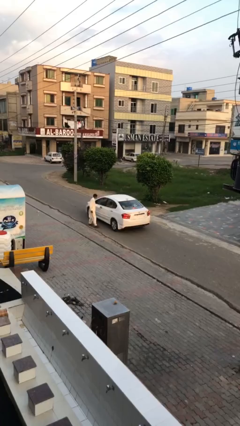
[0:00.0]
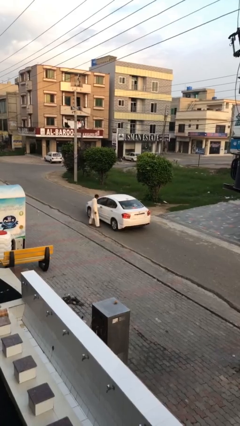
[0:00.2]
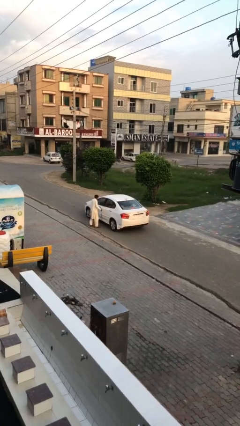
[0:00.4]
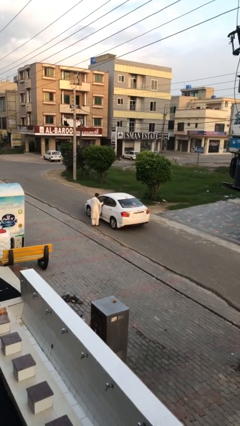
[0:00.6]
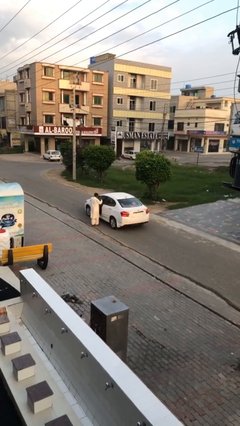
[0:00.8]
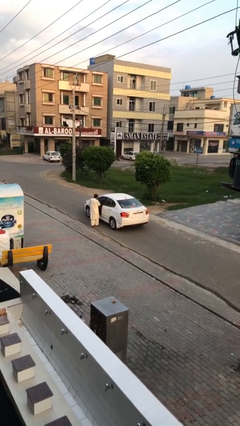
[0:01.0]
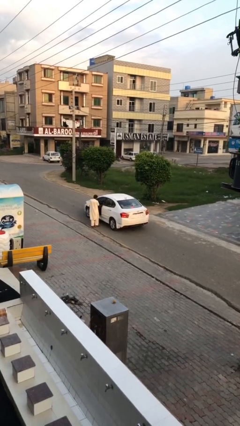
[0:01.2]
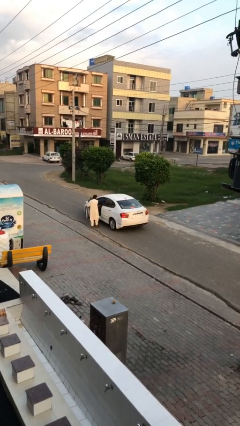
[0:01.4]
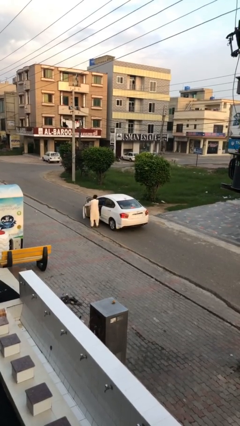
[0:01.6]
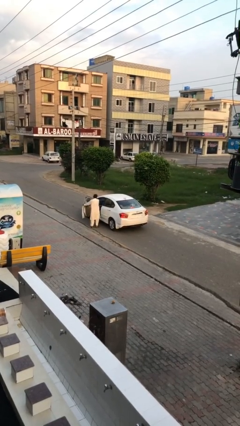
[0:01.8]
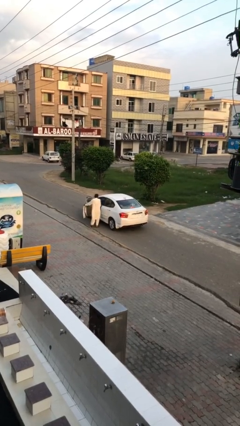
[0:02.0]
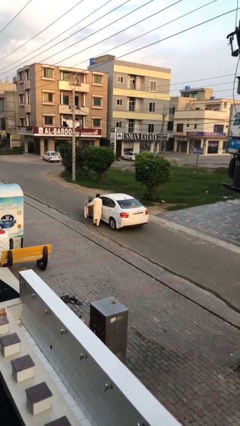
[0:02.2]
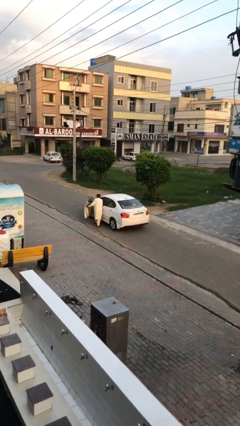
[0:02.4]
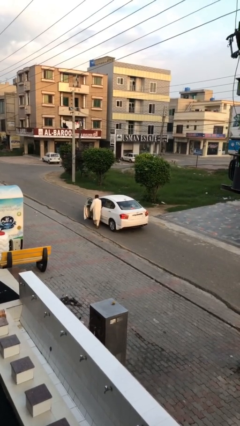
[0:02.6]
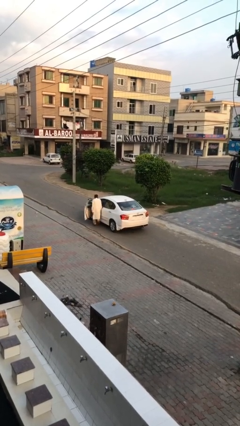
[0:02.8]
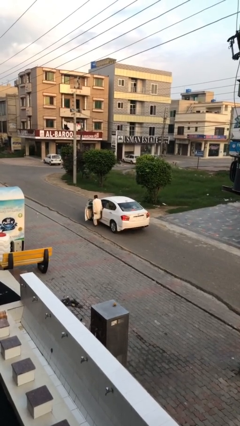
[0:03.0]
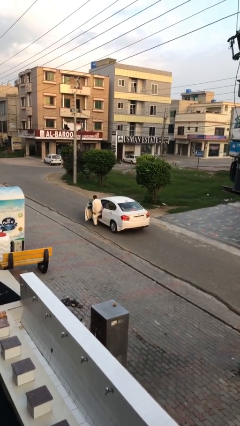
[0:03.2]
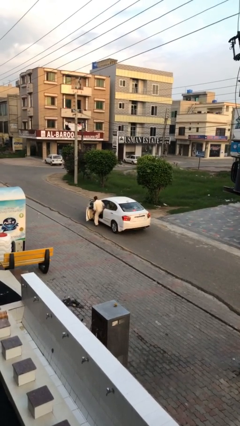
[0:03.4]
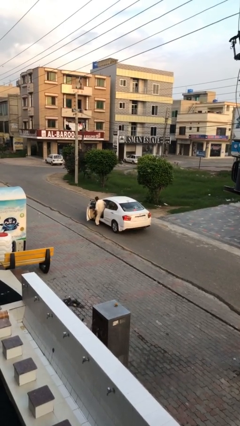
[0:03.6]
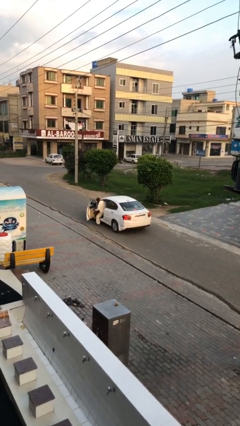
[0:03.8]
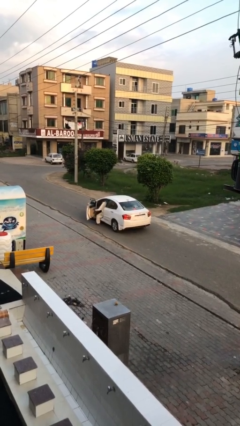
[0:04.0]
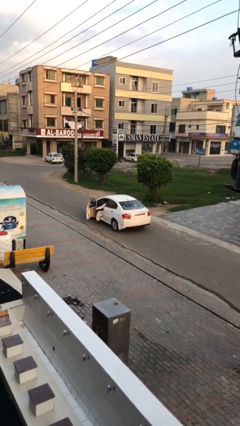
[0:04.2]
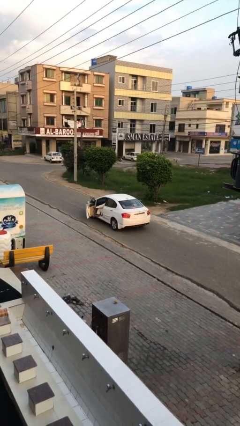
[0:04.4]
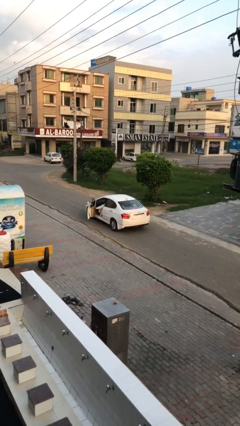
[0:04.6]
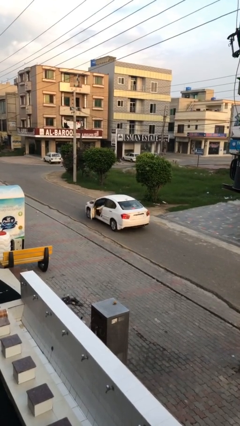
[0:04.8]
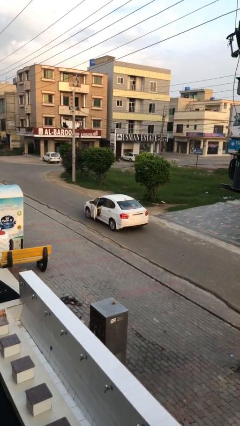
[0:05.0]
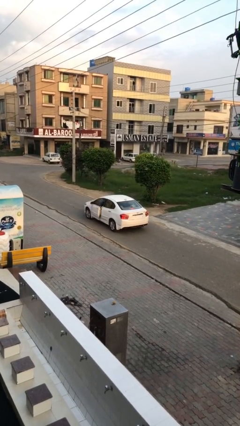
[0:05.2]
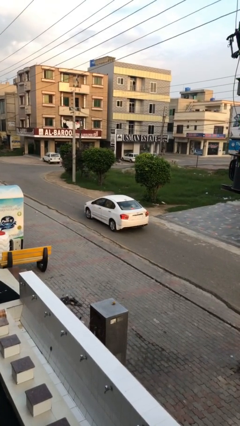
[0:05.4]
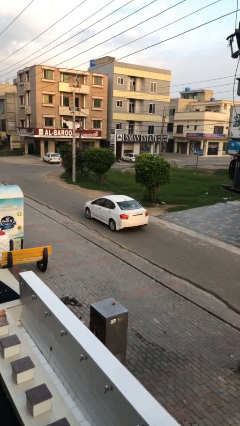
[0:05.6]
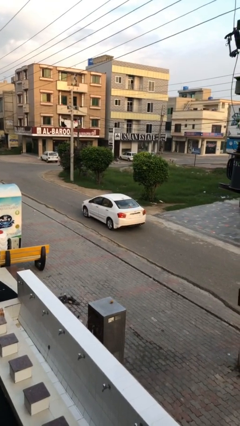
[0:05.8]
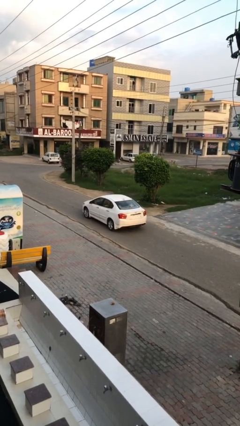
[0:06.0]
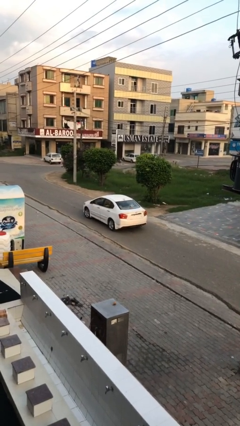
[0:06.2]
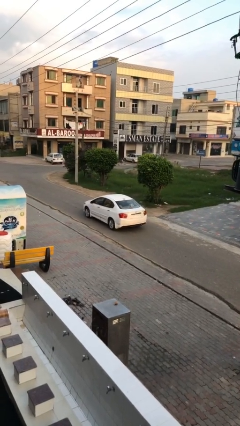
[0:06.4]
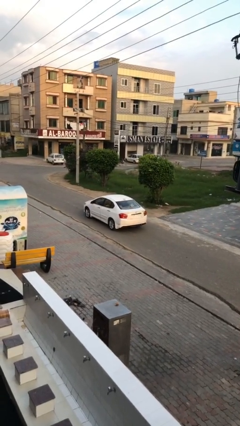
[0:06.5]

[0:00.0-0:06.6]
car picks up person

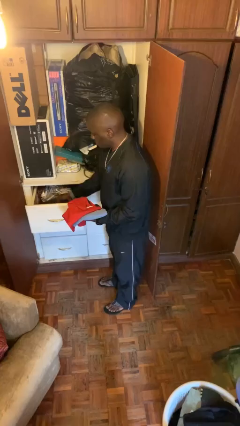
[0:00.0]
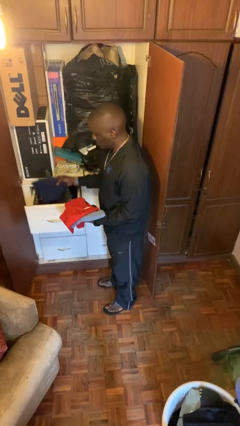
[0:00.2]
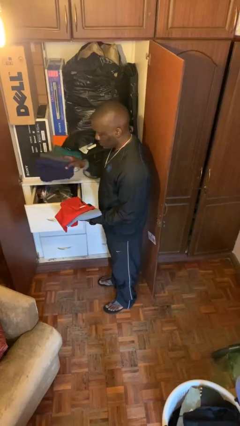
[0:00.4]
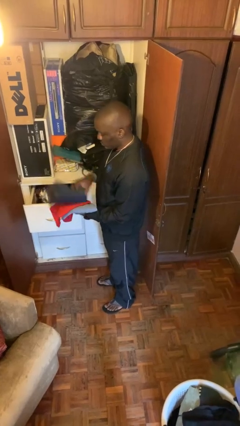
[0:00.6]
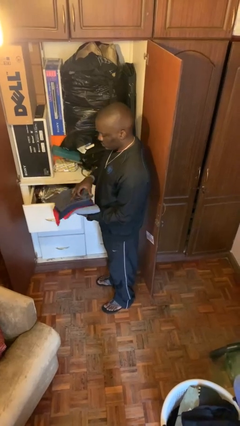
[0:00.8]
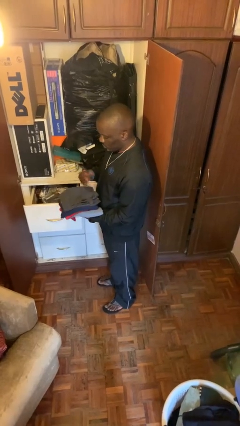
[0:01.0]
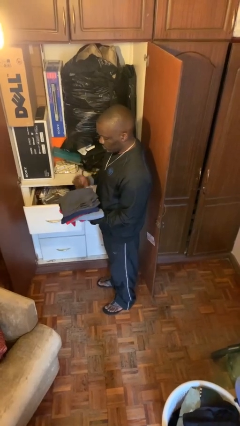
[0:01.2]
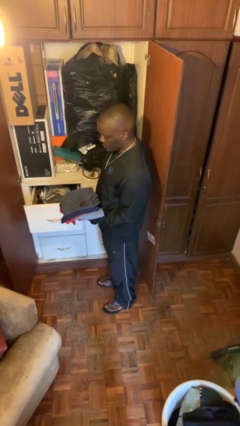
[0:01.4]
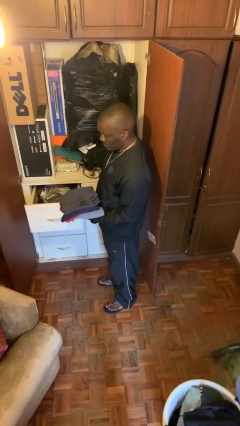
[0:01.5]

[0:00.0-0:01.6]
person takes clothes from dresser

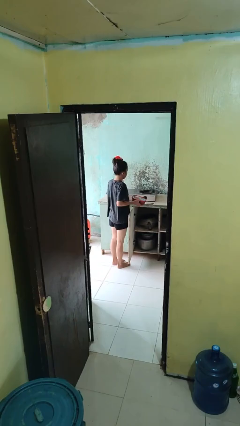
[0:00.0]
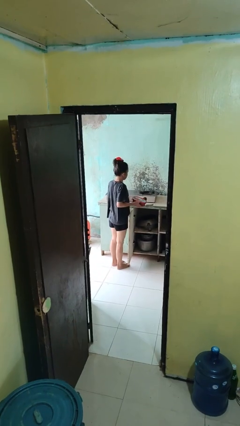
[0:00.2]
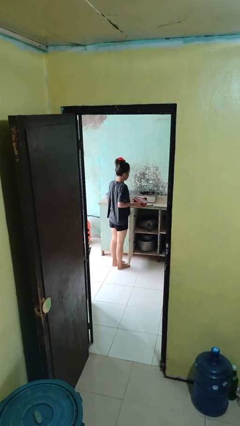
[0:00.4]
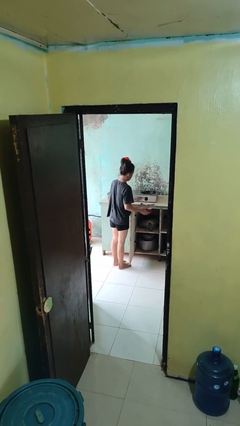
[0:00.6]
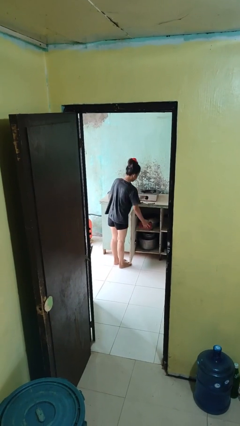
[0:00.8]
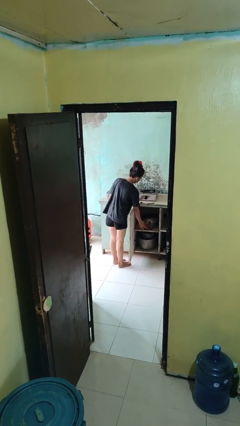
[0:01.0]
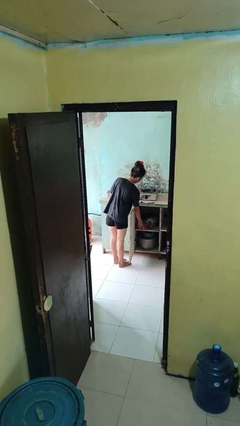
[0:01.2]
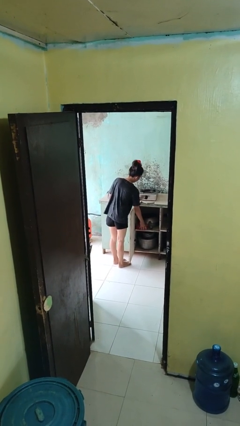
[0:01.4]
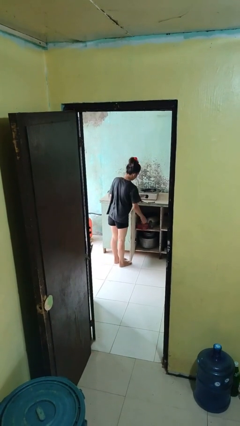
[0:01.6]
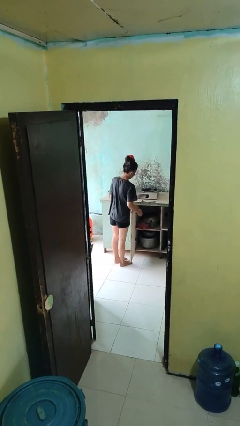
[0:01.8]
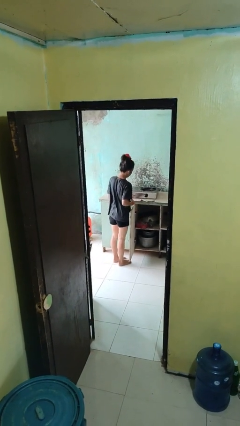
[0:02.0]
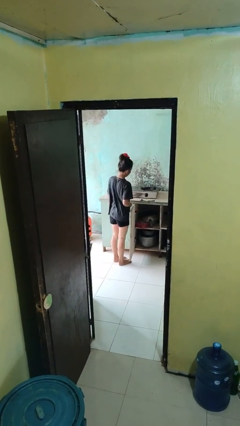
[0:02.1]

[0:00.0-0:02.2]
person puts object in cabinet

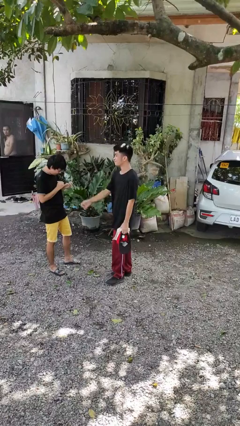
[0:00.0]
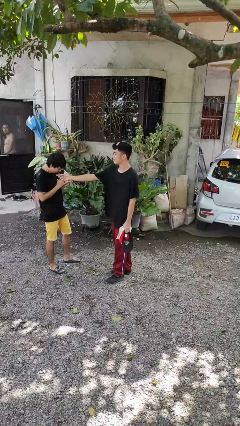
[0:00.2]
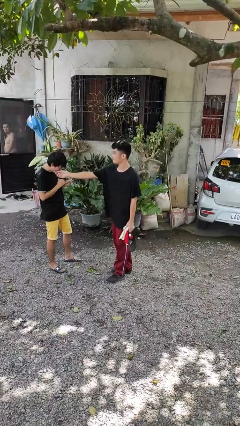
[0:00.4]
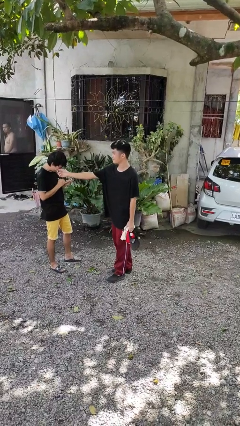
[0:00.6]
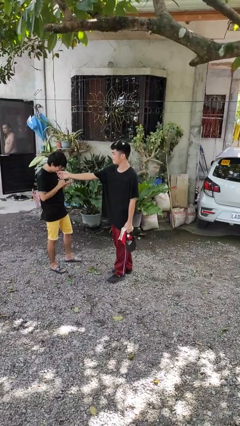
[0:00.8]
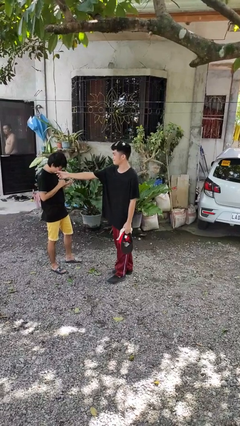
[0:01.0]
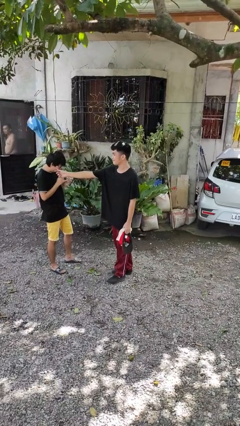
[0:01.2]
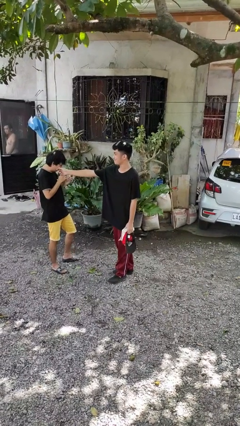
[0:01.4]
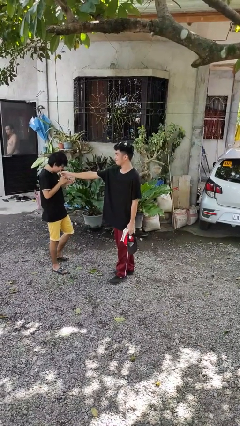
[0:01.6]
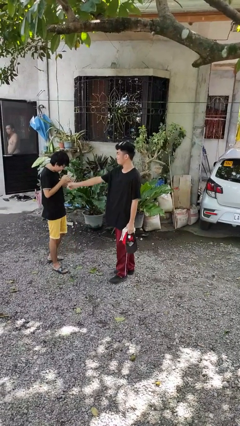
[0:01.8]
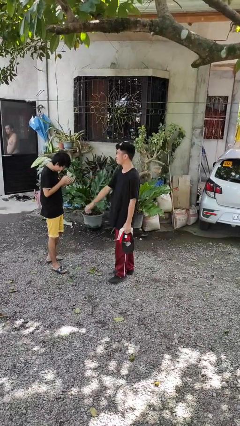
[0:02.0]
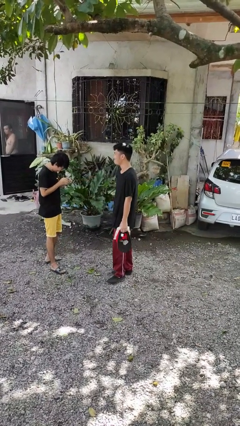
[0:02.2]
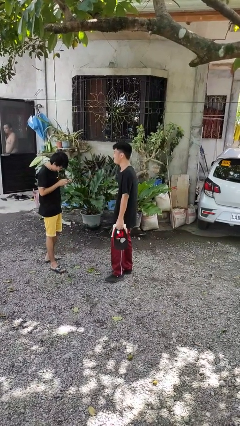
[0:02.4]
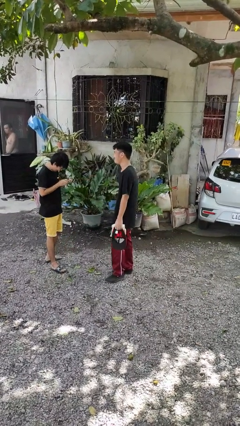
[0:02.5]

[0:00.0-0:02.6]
person touches face of person

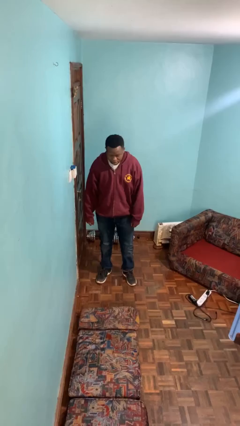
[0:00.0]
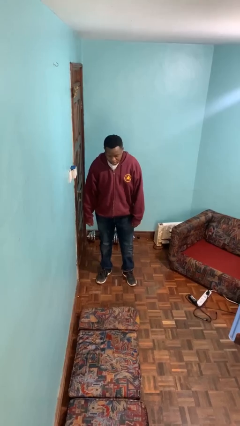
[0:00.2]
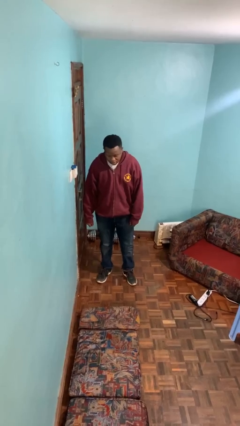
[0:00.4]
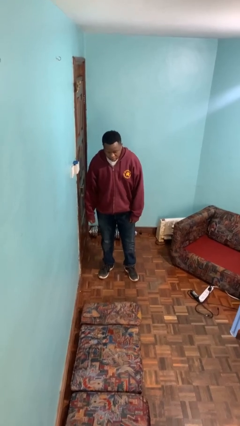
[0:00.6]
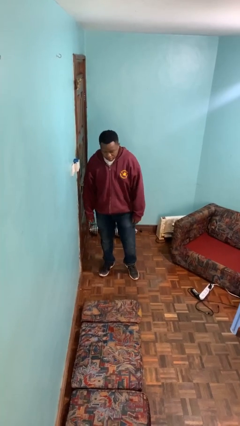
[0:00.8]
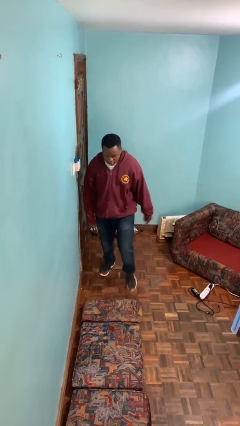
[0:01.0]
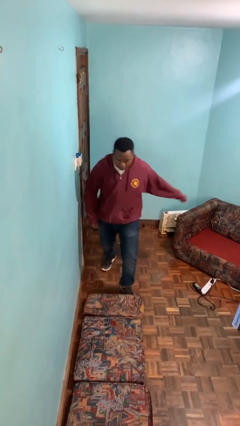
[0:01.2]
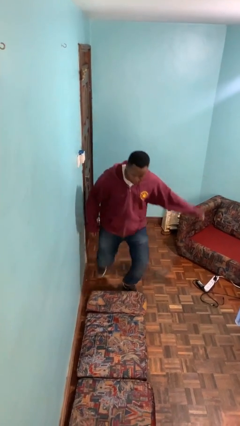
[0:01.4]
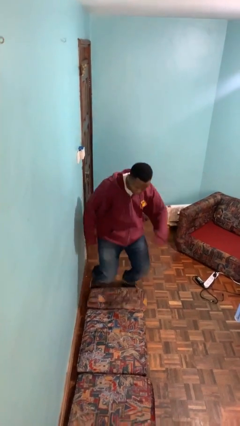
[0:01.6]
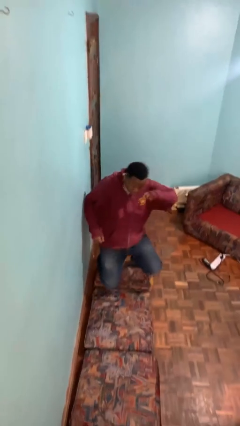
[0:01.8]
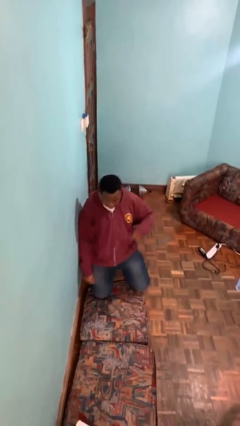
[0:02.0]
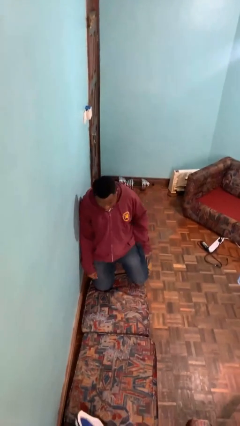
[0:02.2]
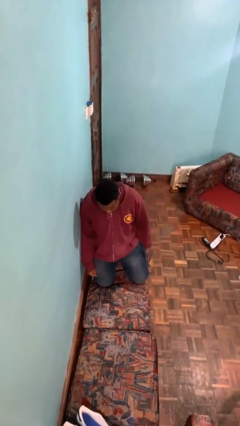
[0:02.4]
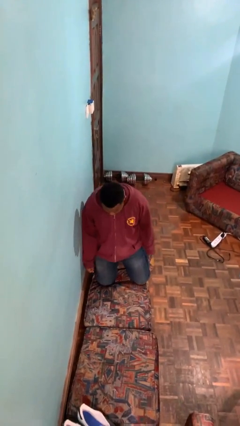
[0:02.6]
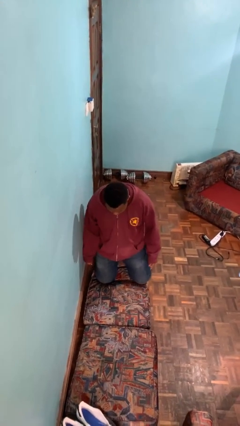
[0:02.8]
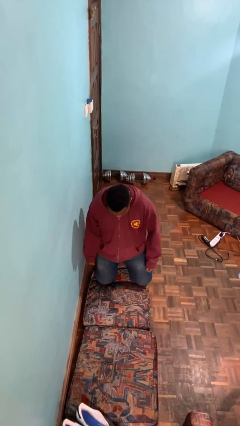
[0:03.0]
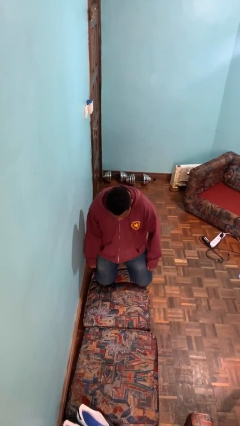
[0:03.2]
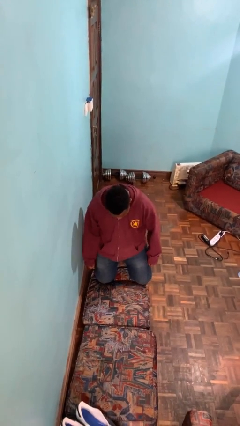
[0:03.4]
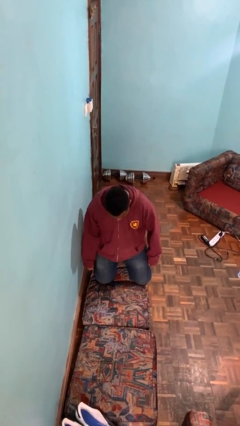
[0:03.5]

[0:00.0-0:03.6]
person trips on object on floor

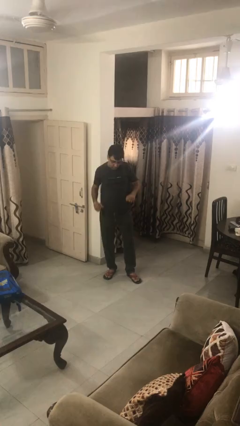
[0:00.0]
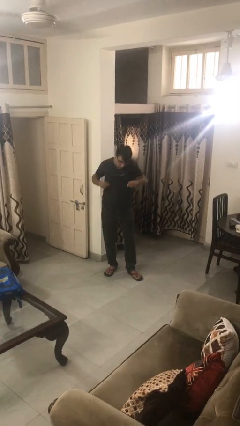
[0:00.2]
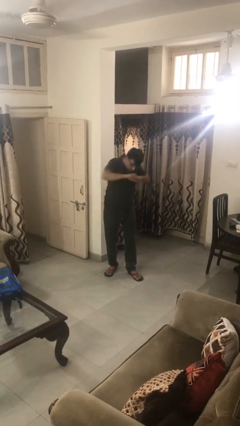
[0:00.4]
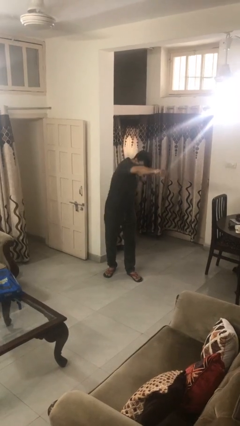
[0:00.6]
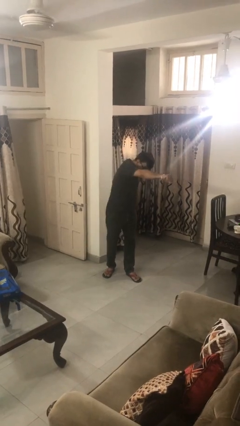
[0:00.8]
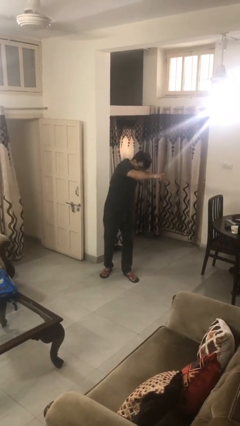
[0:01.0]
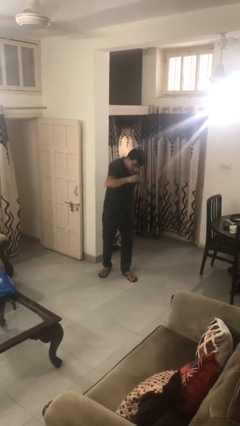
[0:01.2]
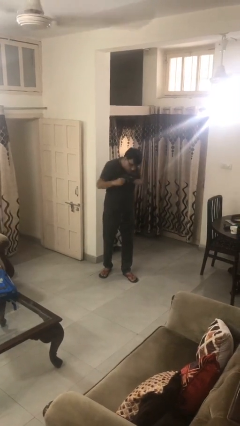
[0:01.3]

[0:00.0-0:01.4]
person punches
